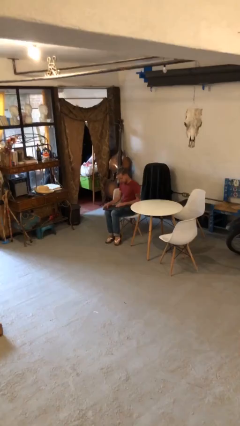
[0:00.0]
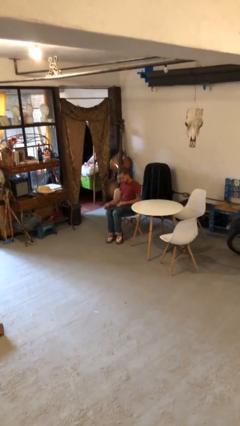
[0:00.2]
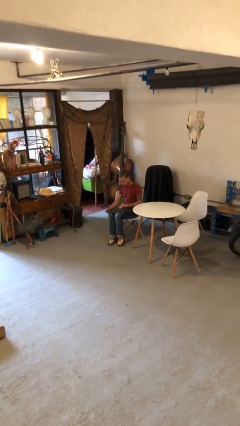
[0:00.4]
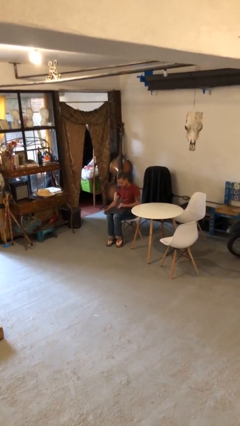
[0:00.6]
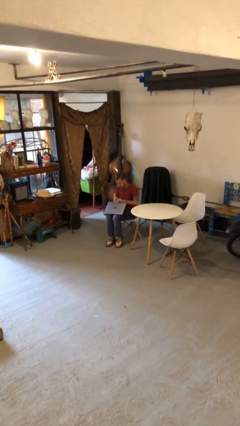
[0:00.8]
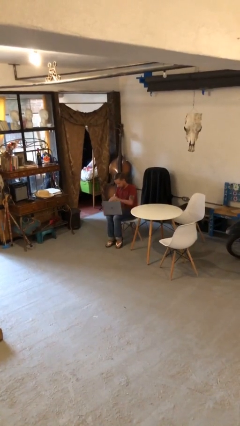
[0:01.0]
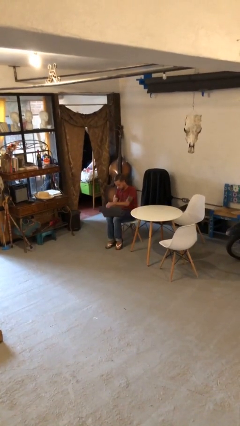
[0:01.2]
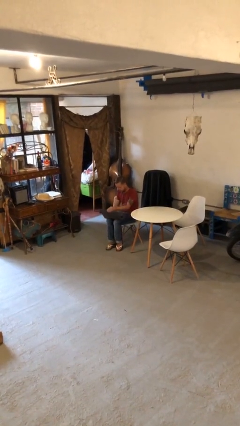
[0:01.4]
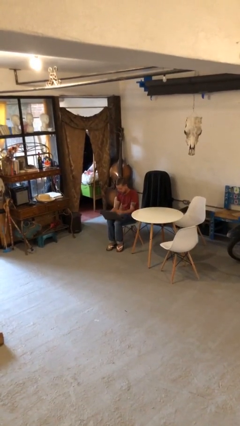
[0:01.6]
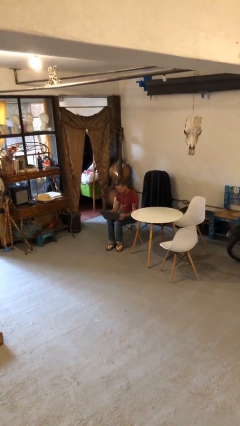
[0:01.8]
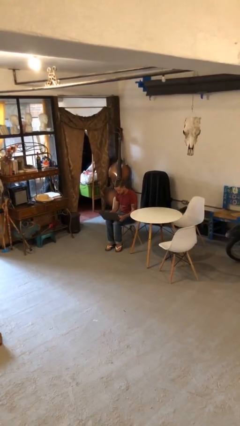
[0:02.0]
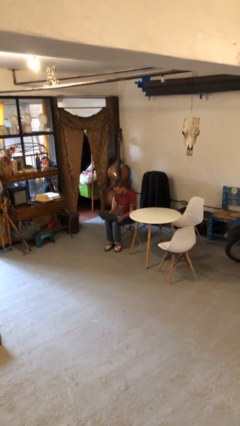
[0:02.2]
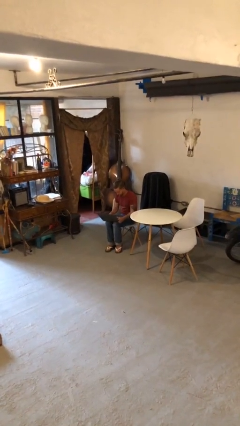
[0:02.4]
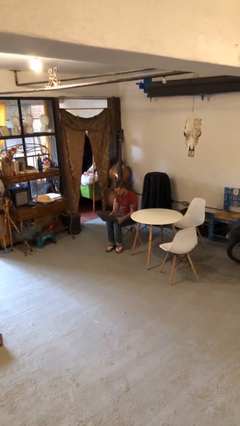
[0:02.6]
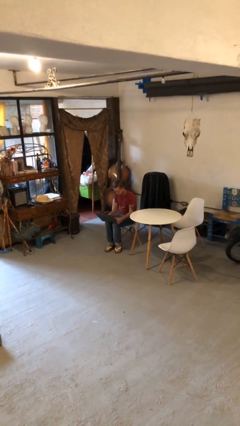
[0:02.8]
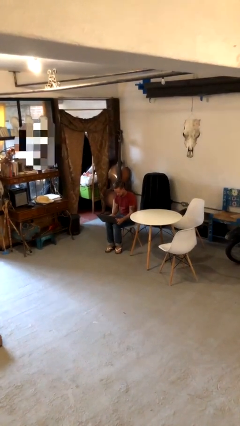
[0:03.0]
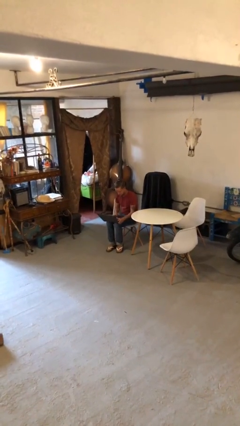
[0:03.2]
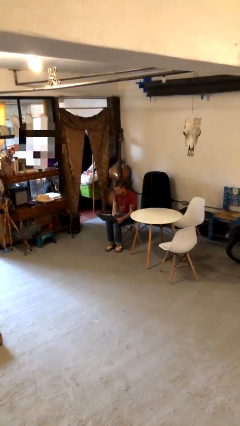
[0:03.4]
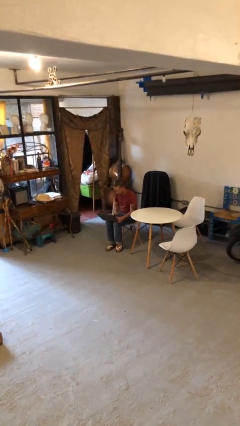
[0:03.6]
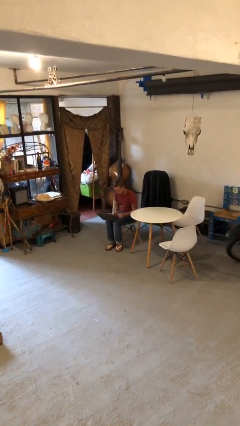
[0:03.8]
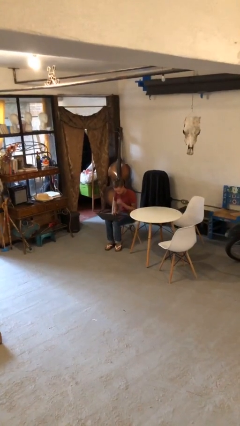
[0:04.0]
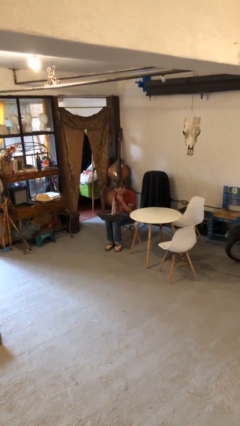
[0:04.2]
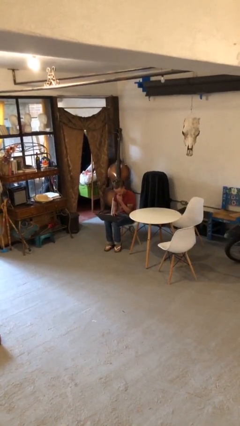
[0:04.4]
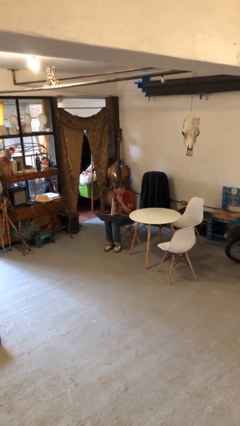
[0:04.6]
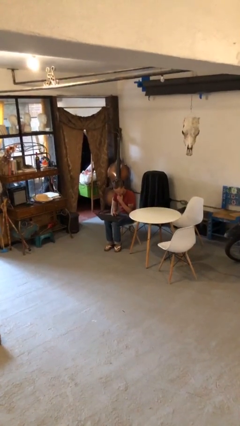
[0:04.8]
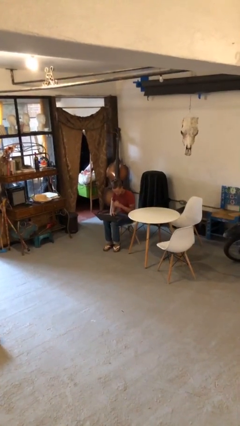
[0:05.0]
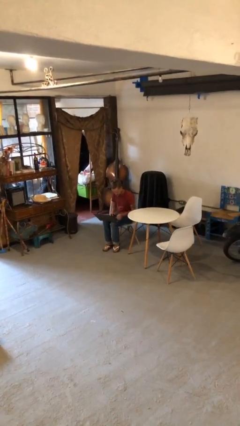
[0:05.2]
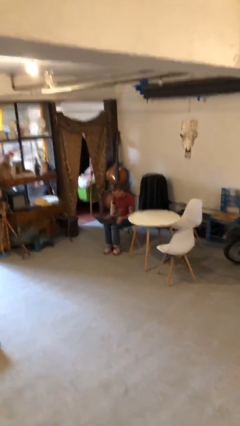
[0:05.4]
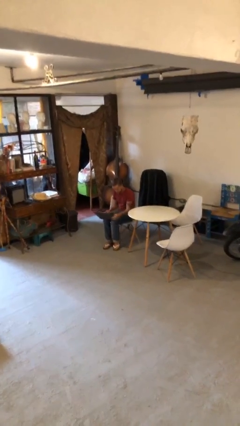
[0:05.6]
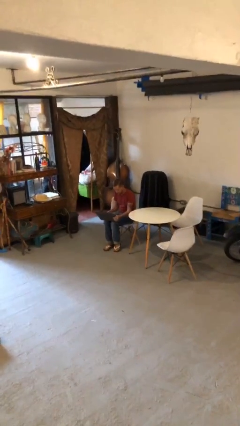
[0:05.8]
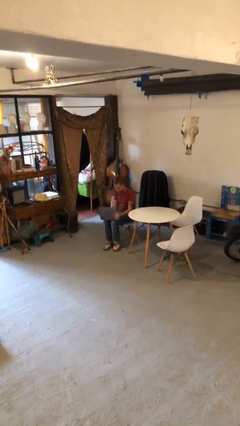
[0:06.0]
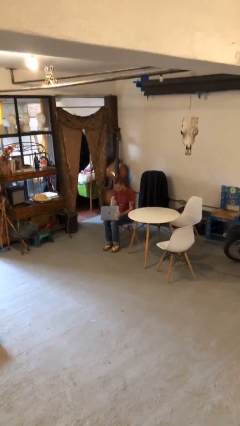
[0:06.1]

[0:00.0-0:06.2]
person interacts with laptop

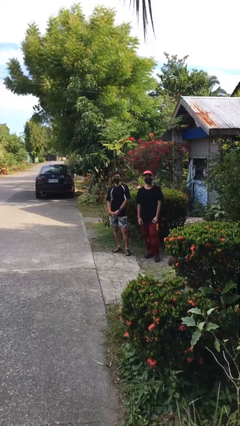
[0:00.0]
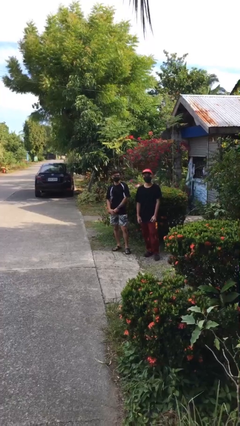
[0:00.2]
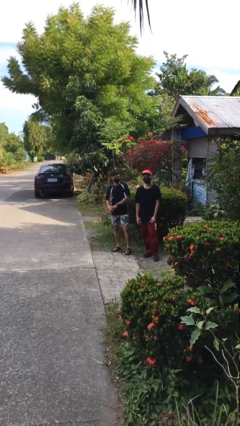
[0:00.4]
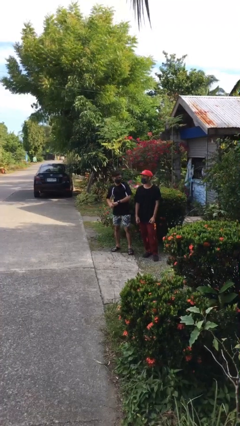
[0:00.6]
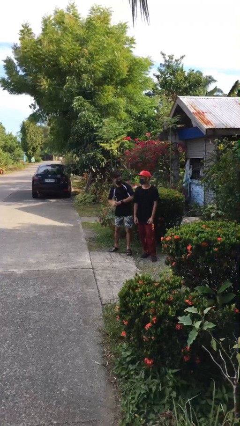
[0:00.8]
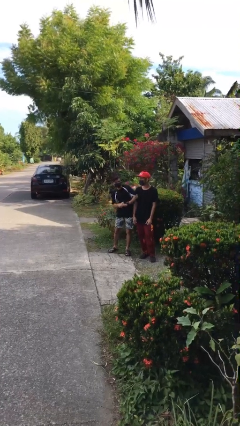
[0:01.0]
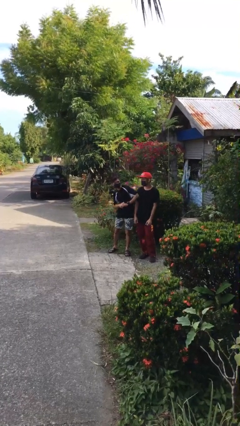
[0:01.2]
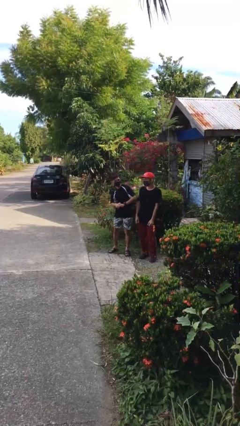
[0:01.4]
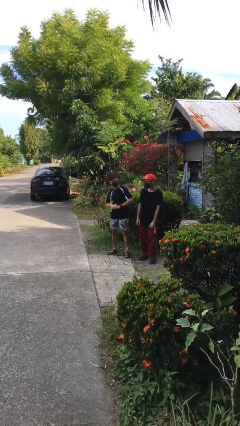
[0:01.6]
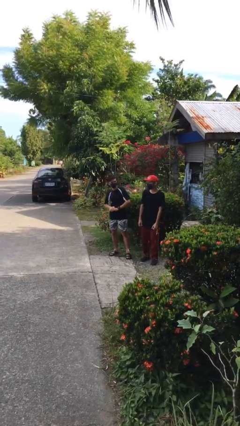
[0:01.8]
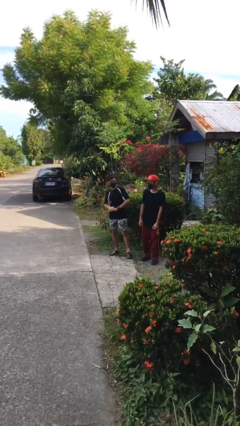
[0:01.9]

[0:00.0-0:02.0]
person nudges person with elbow

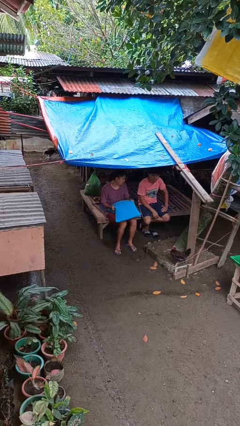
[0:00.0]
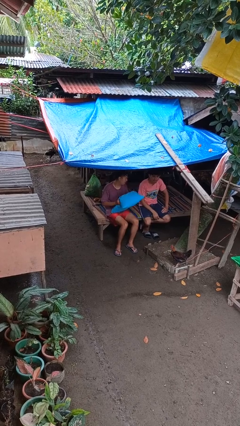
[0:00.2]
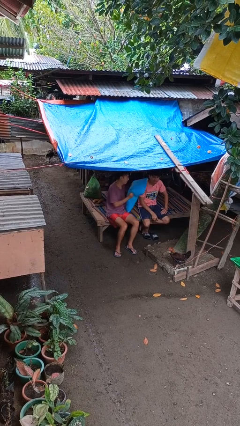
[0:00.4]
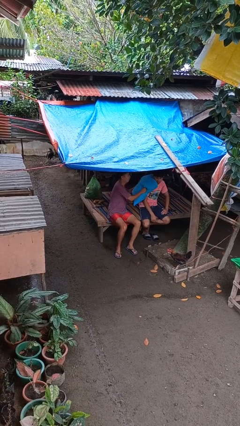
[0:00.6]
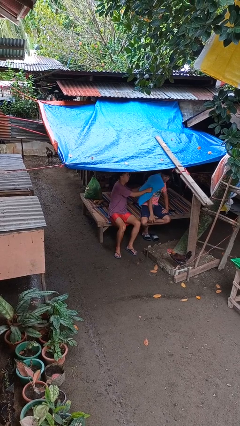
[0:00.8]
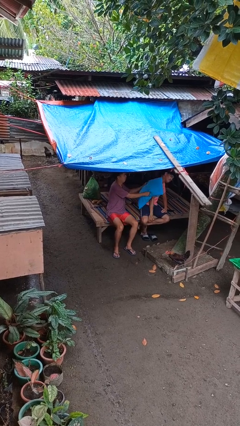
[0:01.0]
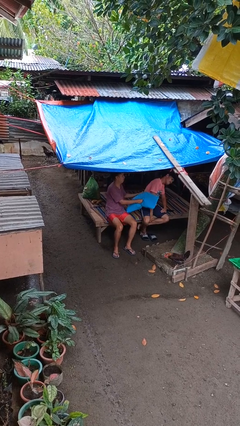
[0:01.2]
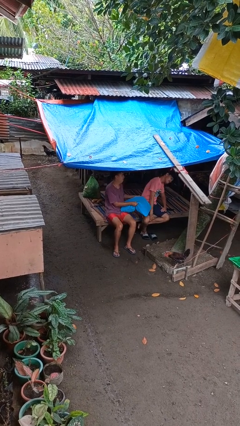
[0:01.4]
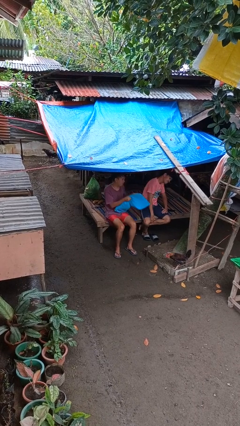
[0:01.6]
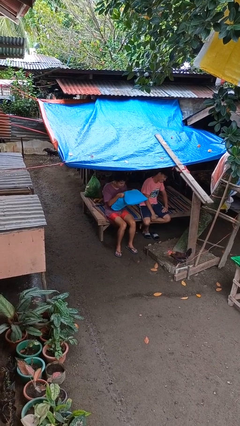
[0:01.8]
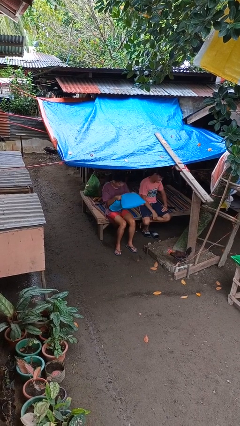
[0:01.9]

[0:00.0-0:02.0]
person hits person with pillow

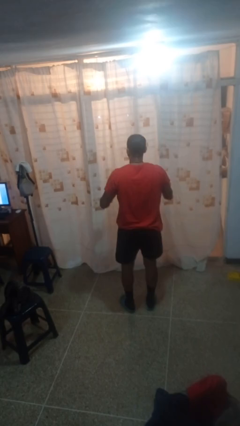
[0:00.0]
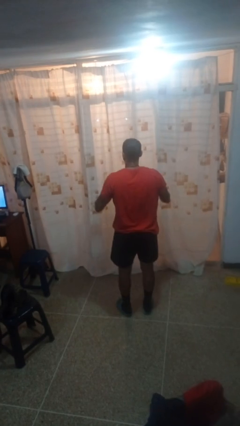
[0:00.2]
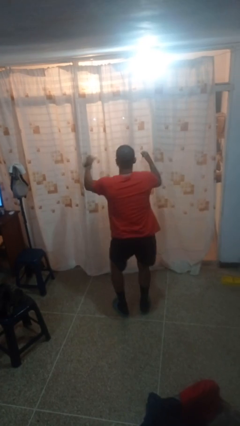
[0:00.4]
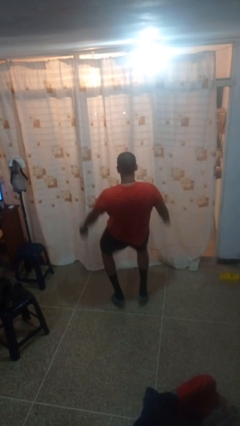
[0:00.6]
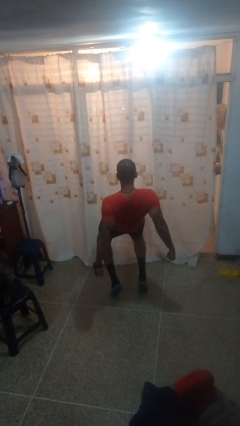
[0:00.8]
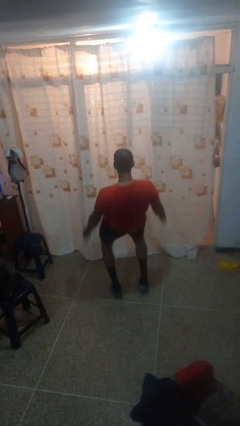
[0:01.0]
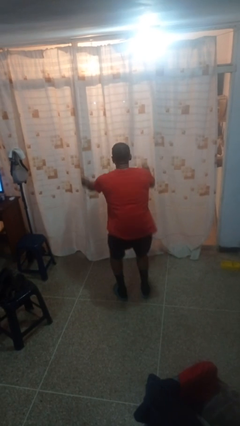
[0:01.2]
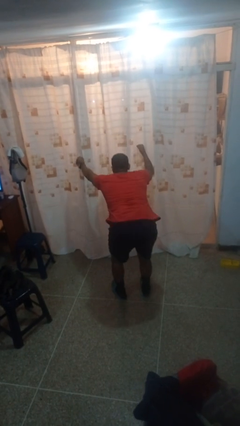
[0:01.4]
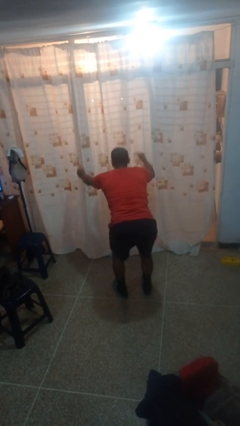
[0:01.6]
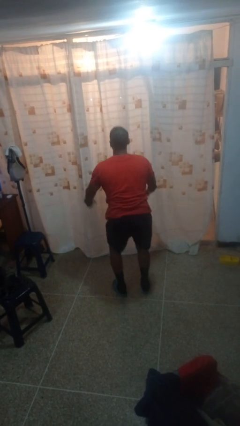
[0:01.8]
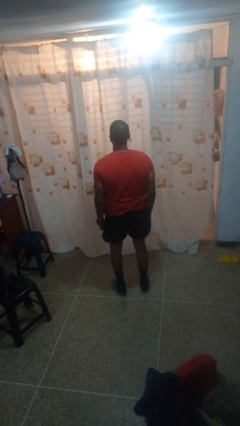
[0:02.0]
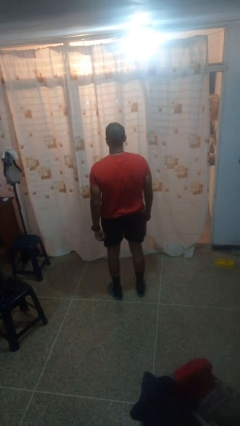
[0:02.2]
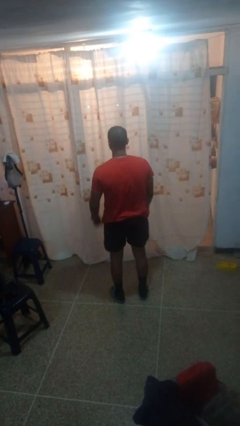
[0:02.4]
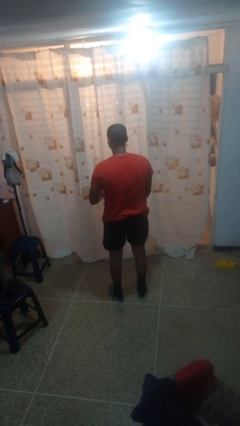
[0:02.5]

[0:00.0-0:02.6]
person wiggles hips

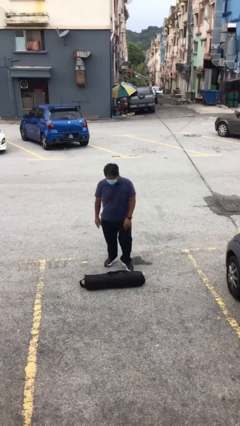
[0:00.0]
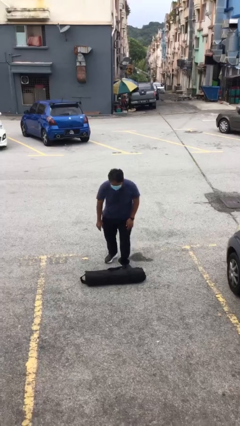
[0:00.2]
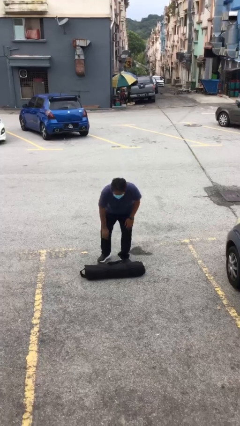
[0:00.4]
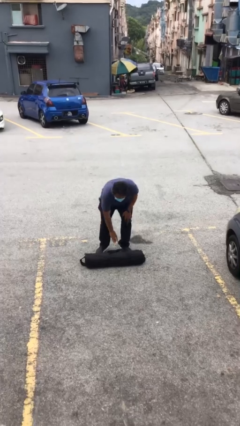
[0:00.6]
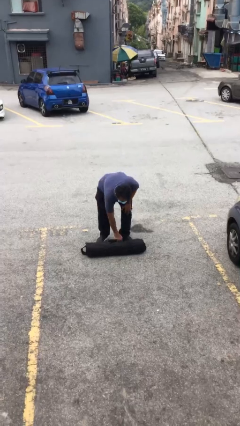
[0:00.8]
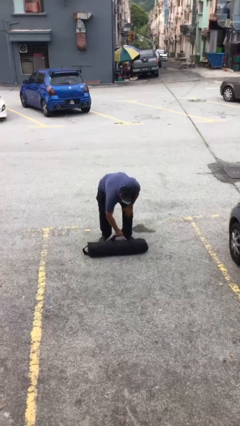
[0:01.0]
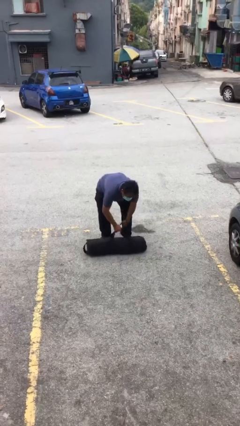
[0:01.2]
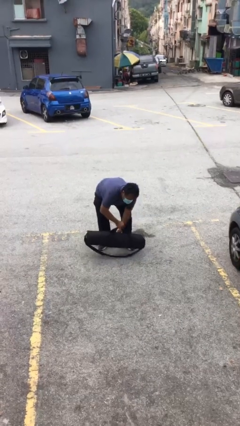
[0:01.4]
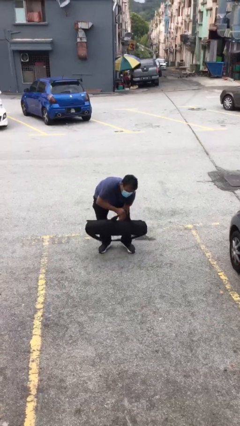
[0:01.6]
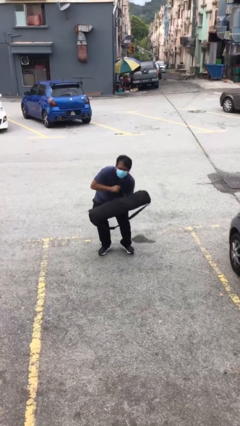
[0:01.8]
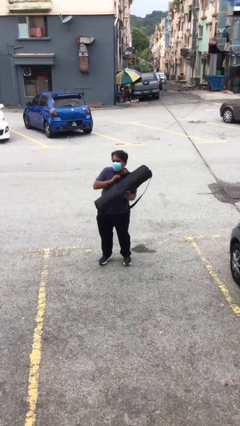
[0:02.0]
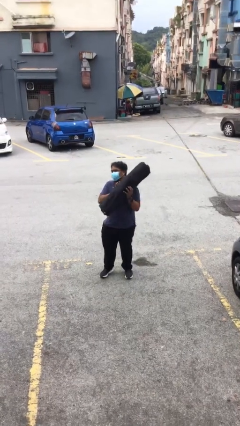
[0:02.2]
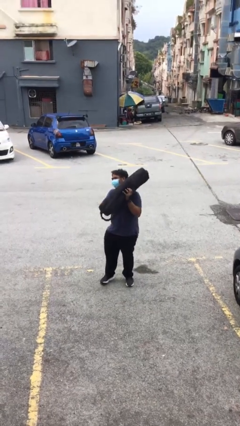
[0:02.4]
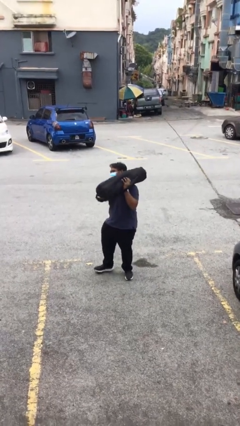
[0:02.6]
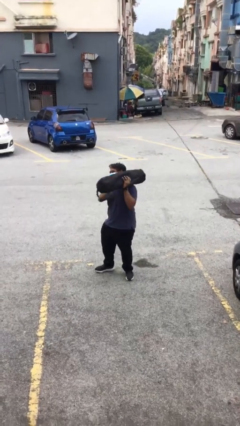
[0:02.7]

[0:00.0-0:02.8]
person picks up object from floor

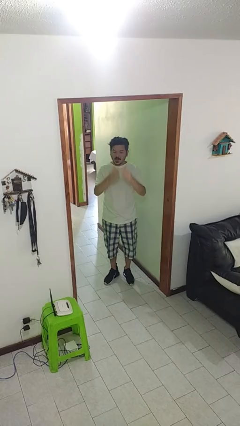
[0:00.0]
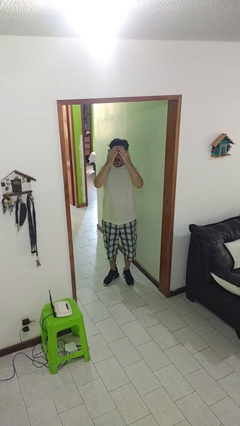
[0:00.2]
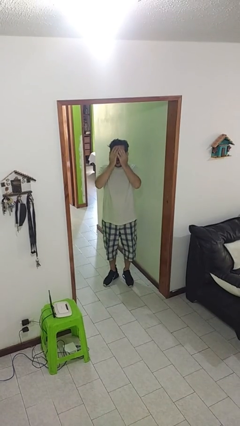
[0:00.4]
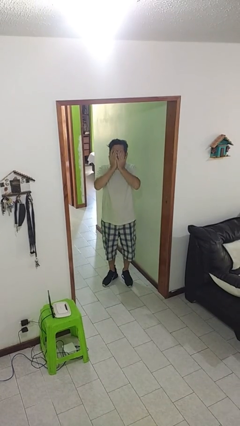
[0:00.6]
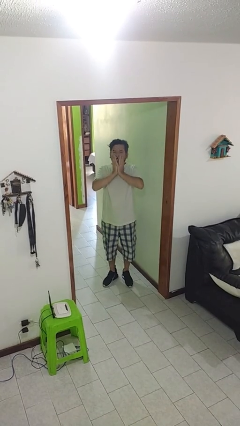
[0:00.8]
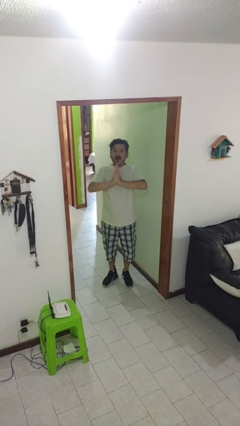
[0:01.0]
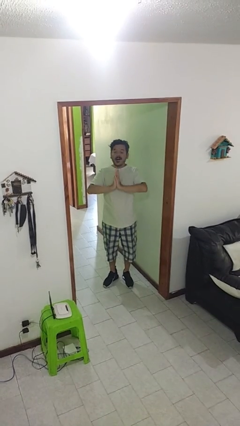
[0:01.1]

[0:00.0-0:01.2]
person covers face with hands

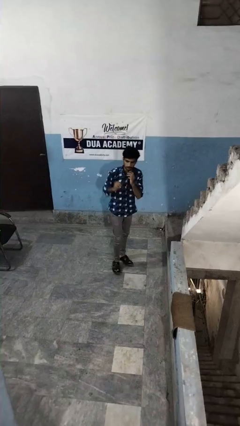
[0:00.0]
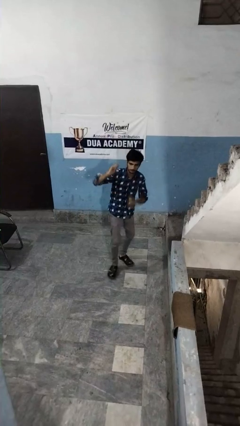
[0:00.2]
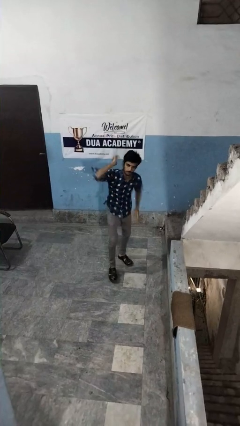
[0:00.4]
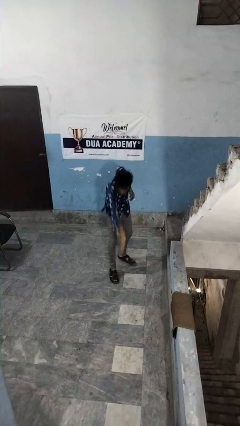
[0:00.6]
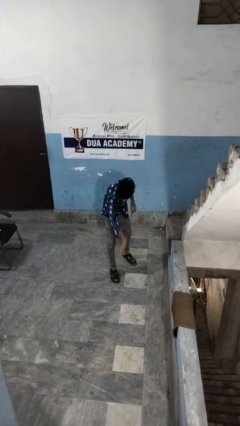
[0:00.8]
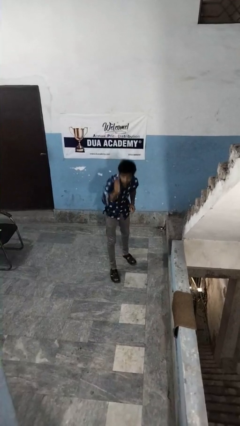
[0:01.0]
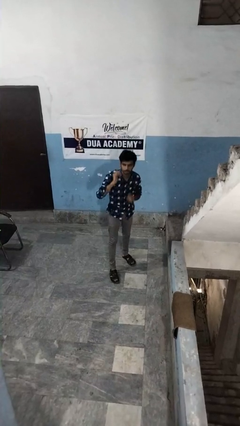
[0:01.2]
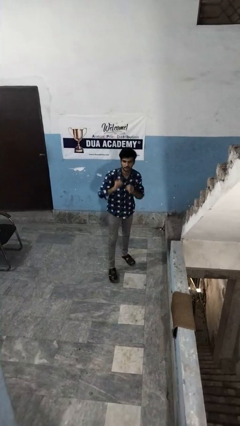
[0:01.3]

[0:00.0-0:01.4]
person karate chop
